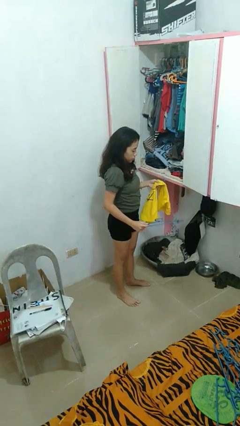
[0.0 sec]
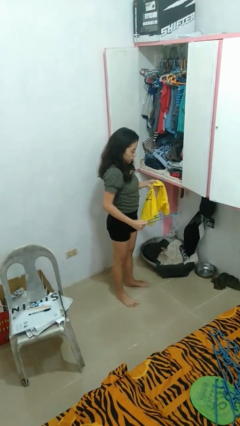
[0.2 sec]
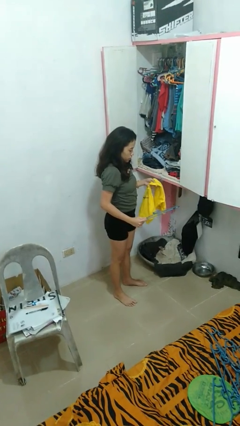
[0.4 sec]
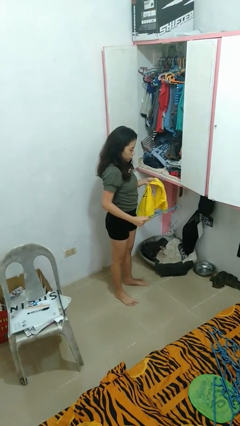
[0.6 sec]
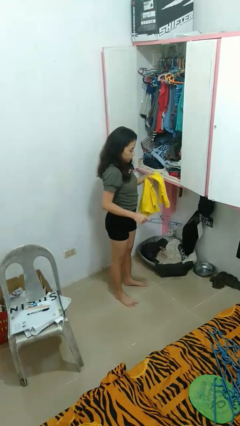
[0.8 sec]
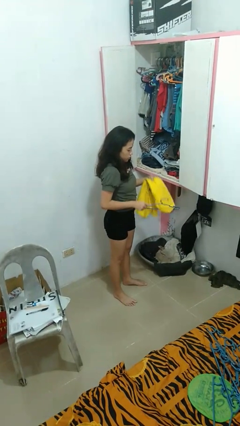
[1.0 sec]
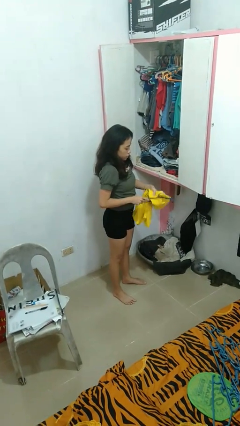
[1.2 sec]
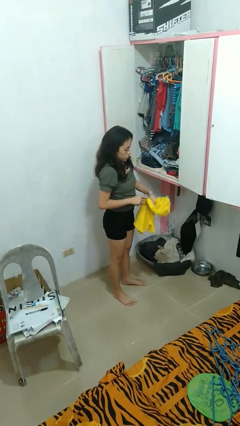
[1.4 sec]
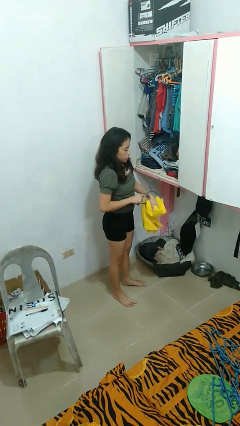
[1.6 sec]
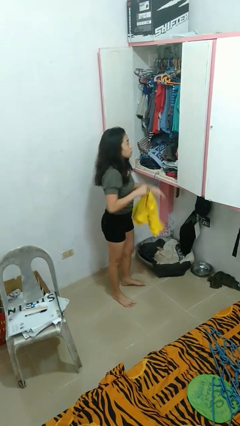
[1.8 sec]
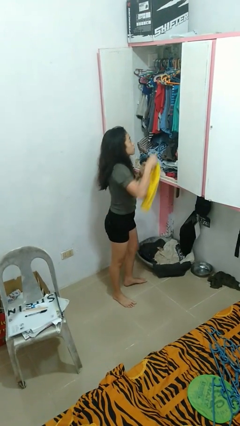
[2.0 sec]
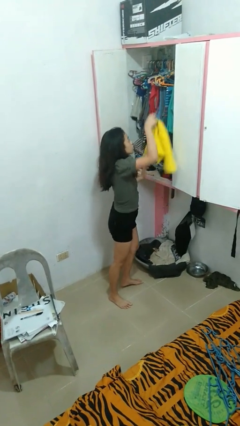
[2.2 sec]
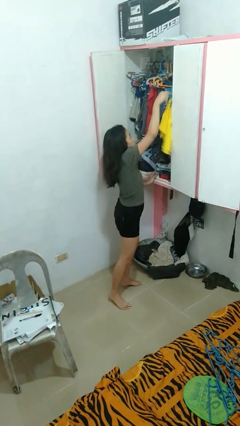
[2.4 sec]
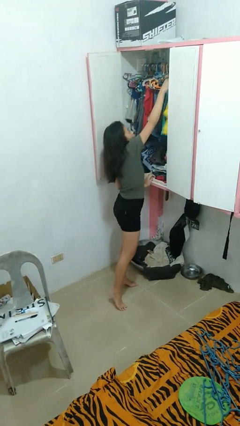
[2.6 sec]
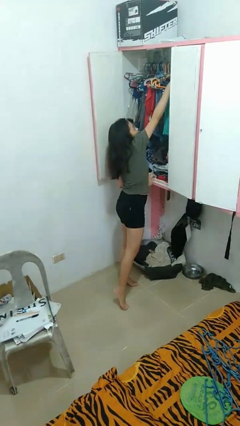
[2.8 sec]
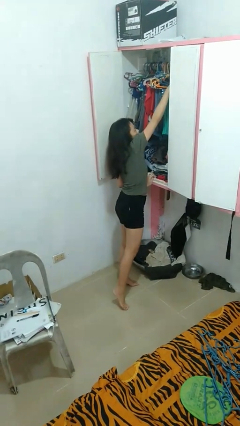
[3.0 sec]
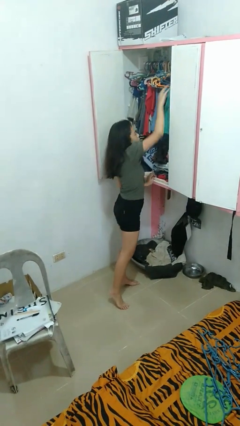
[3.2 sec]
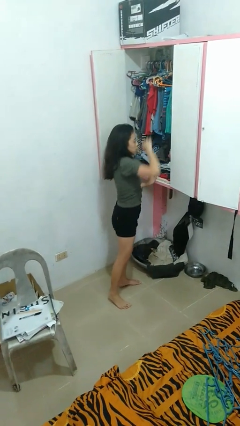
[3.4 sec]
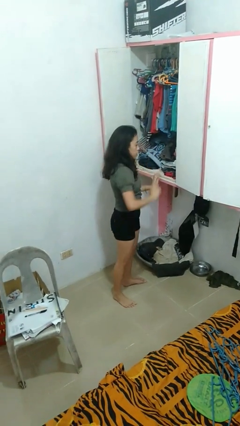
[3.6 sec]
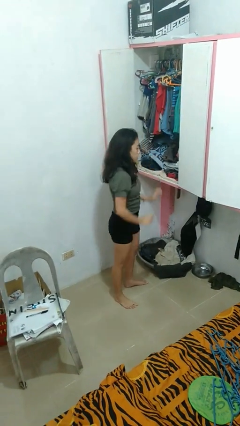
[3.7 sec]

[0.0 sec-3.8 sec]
person puts clothes into closet

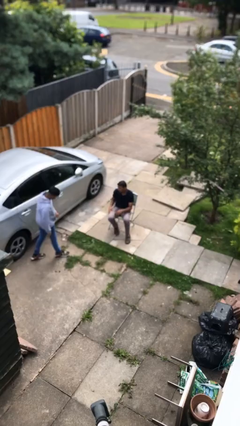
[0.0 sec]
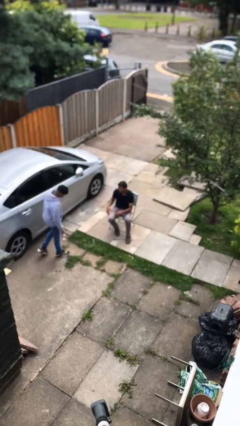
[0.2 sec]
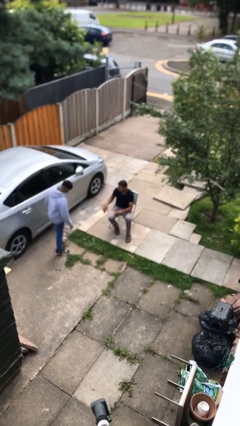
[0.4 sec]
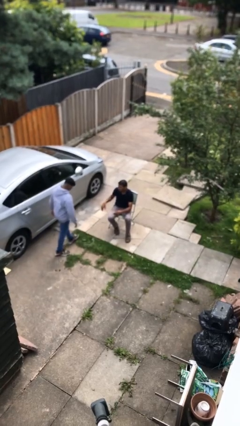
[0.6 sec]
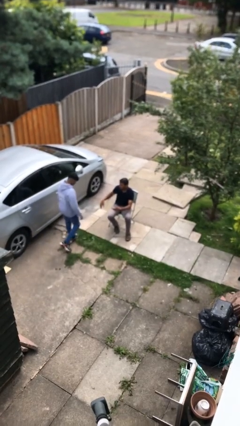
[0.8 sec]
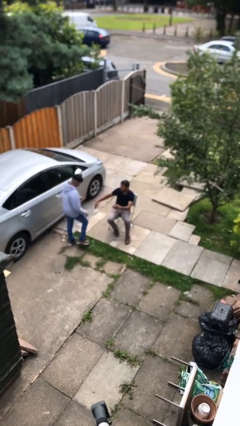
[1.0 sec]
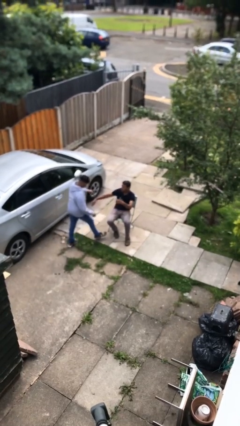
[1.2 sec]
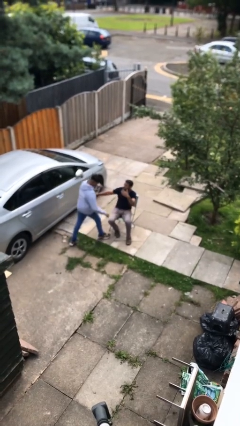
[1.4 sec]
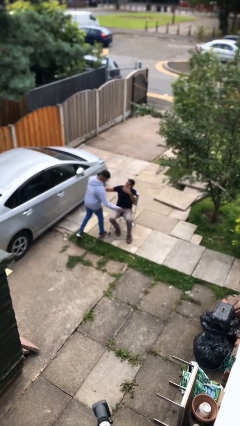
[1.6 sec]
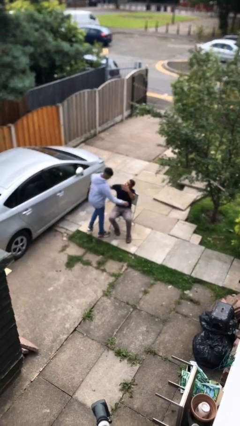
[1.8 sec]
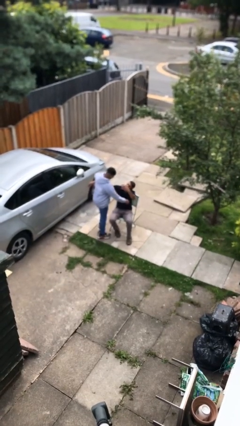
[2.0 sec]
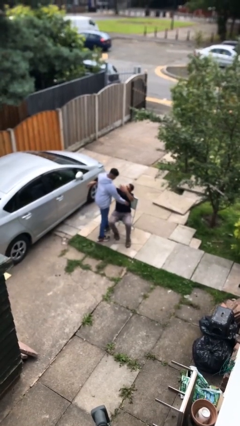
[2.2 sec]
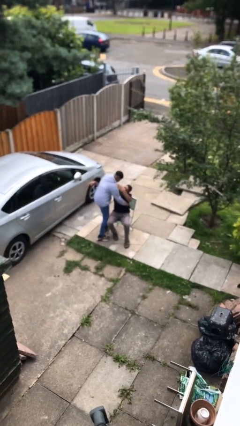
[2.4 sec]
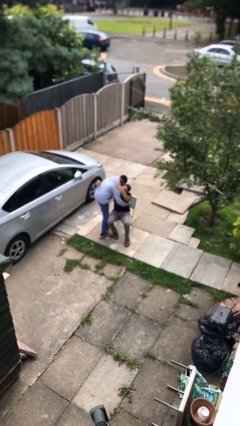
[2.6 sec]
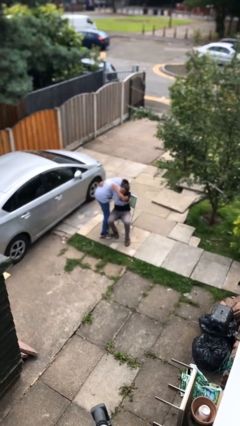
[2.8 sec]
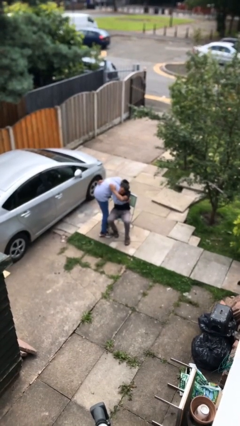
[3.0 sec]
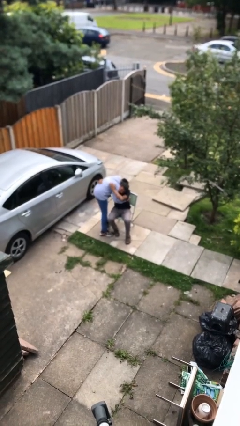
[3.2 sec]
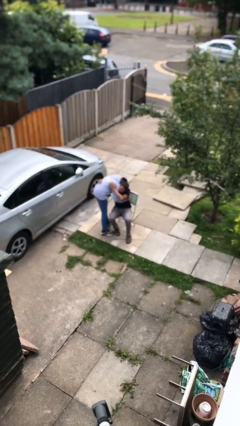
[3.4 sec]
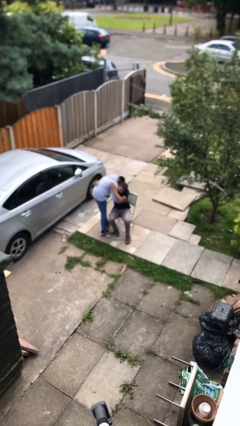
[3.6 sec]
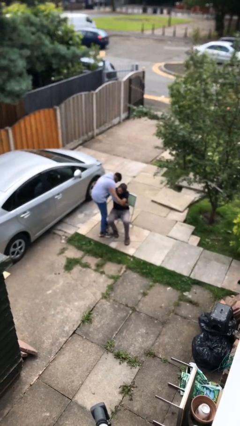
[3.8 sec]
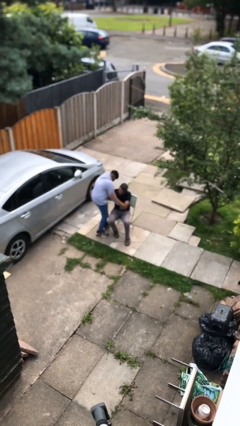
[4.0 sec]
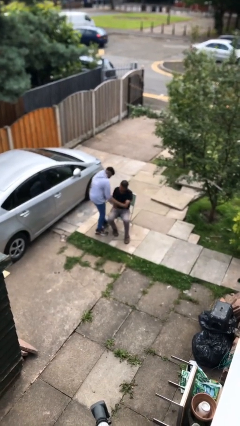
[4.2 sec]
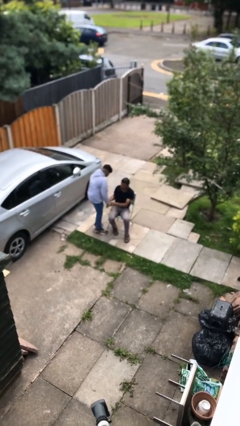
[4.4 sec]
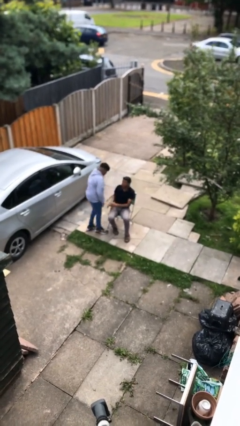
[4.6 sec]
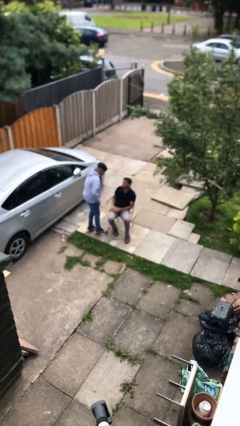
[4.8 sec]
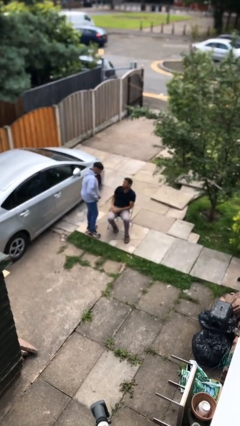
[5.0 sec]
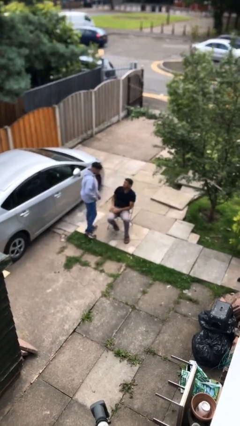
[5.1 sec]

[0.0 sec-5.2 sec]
person embraces person

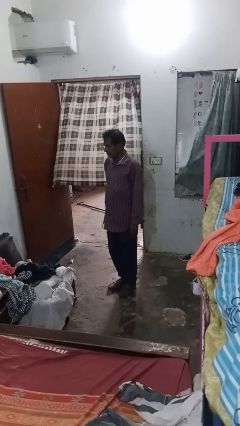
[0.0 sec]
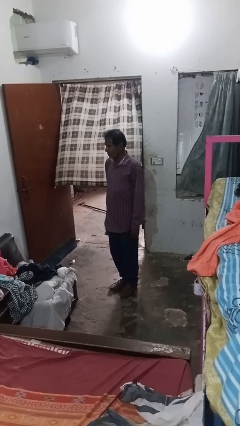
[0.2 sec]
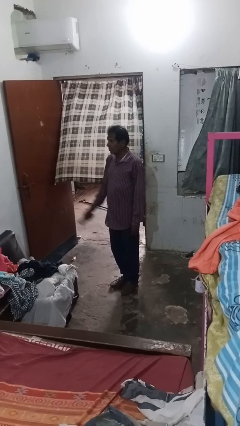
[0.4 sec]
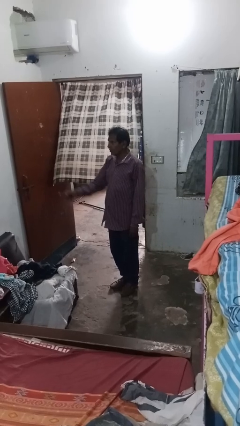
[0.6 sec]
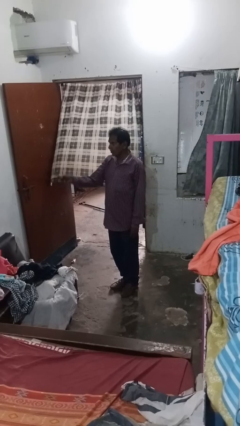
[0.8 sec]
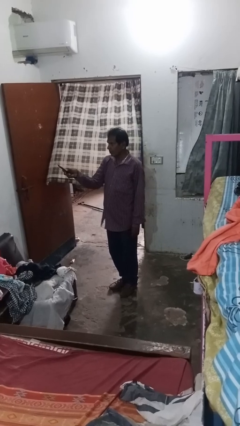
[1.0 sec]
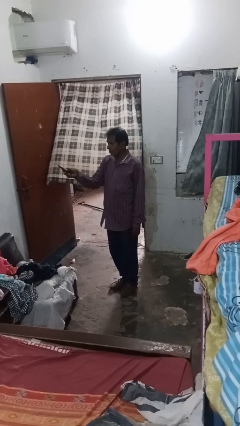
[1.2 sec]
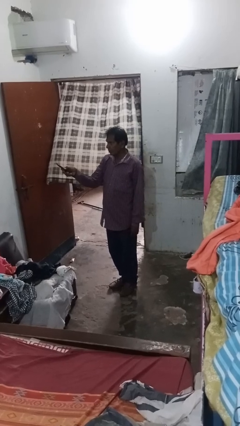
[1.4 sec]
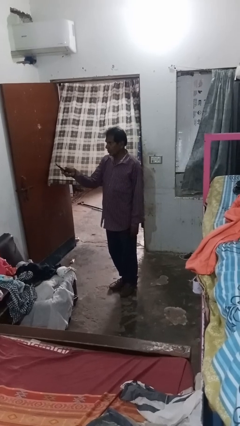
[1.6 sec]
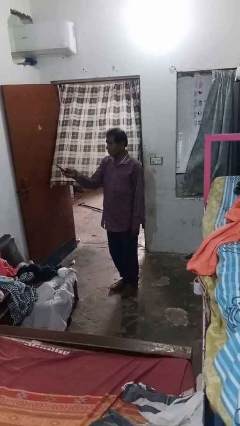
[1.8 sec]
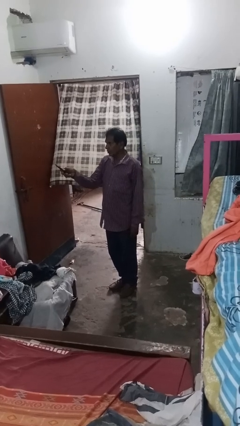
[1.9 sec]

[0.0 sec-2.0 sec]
person uses television remote

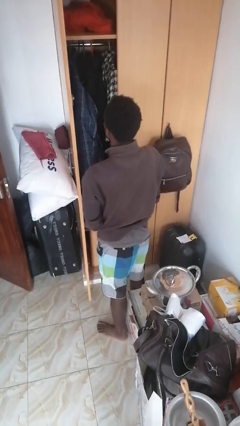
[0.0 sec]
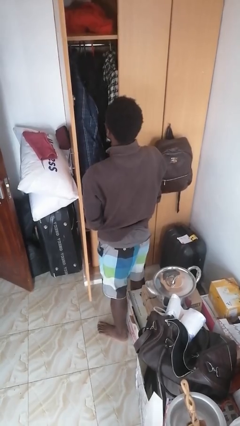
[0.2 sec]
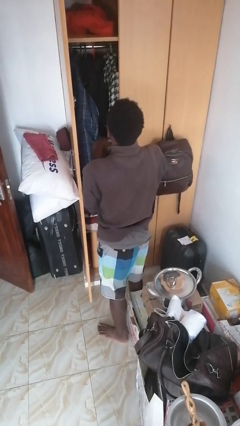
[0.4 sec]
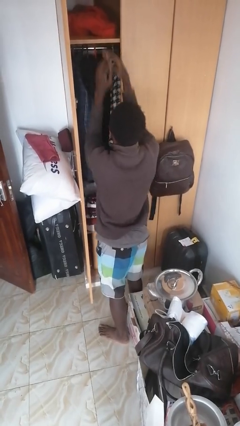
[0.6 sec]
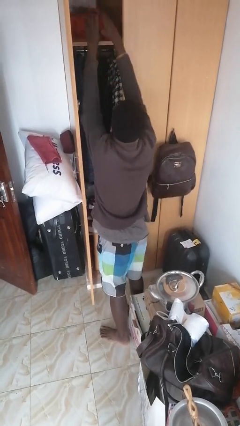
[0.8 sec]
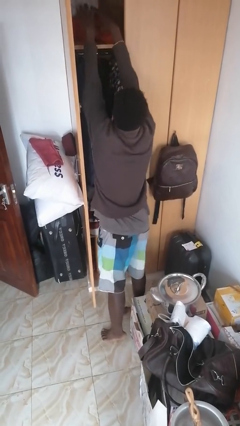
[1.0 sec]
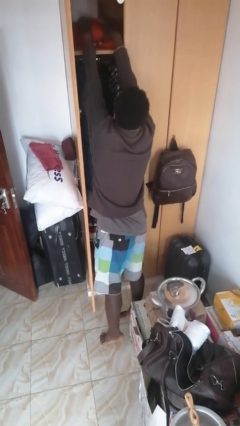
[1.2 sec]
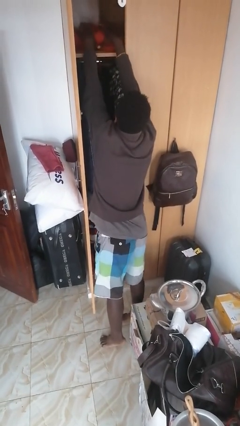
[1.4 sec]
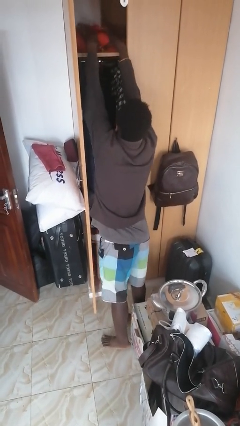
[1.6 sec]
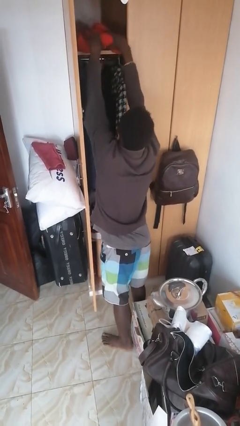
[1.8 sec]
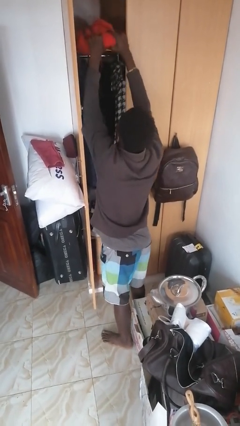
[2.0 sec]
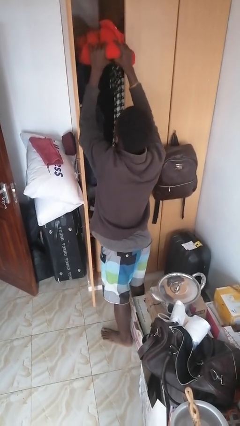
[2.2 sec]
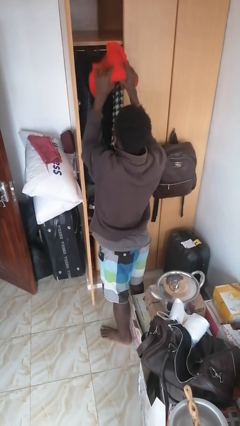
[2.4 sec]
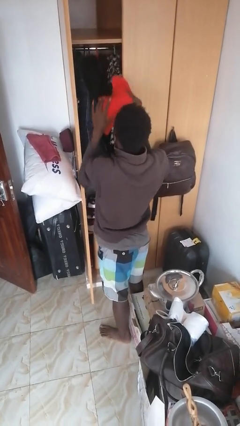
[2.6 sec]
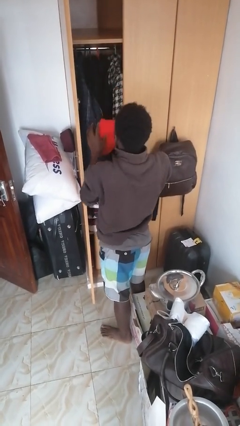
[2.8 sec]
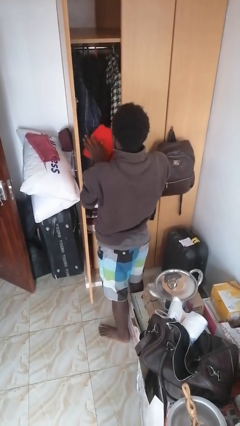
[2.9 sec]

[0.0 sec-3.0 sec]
person picks up object from shelf

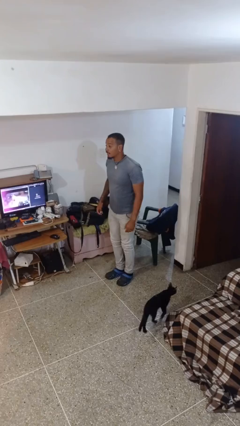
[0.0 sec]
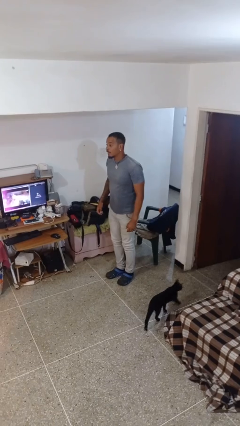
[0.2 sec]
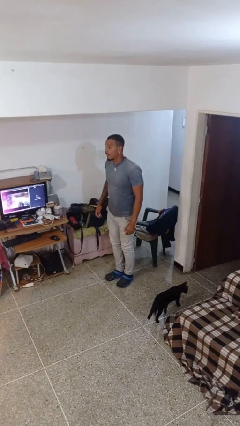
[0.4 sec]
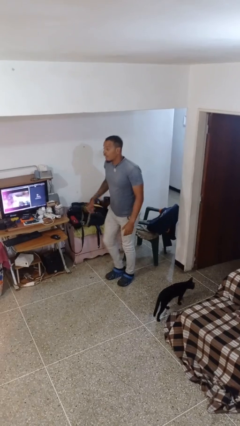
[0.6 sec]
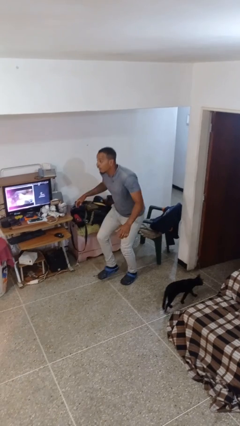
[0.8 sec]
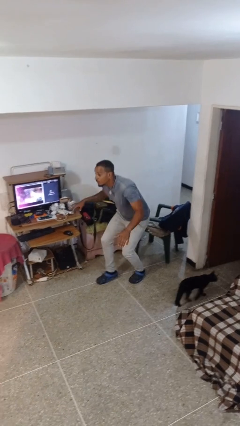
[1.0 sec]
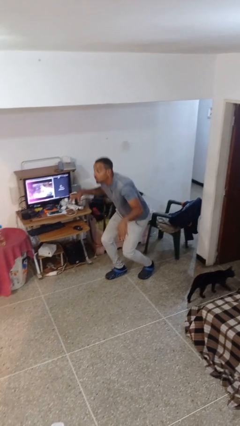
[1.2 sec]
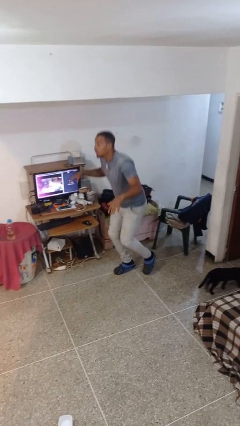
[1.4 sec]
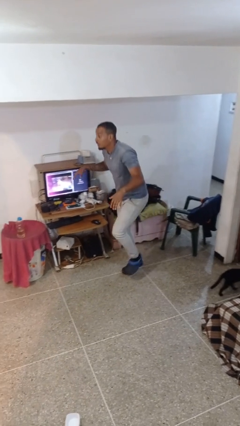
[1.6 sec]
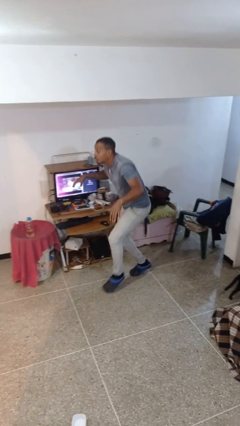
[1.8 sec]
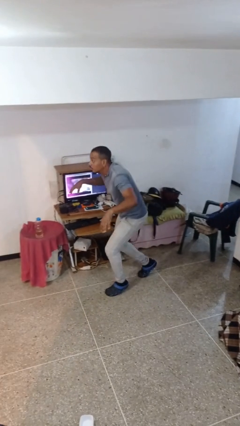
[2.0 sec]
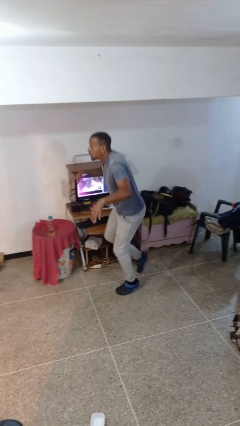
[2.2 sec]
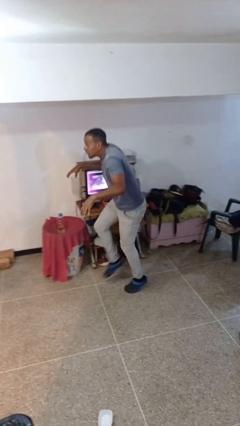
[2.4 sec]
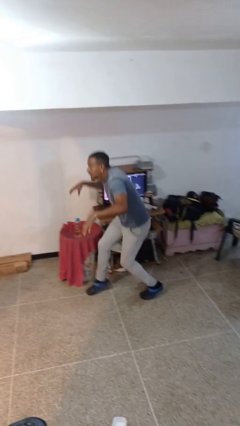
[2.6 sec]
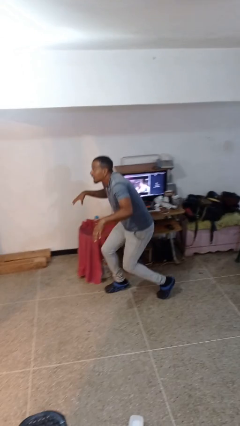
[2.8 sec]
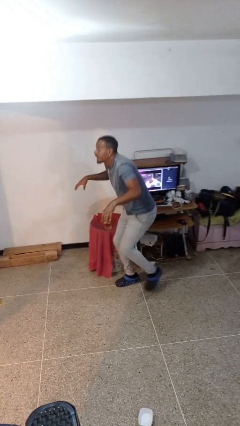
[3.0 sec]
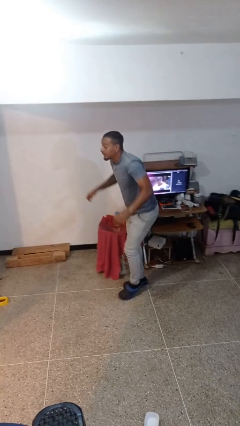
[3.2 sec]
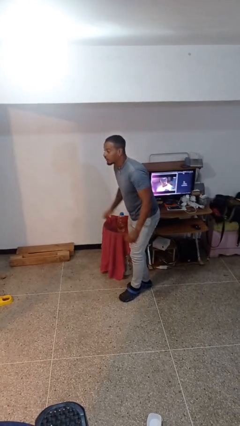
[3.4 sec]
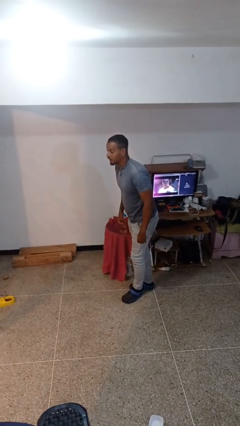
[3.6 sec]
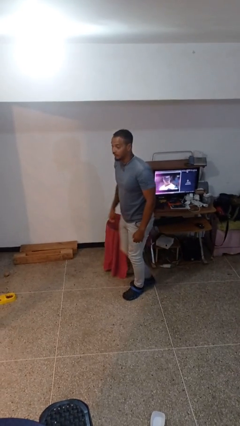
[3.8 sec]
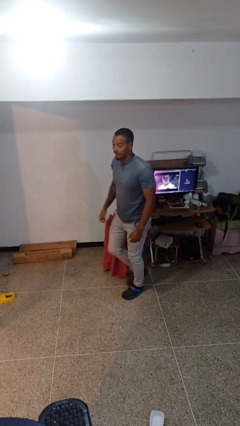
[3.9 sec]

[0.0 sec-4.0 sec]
person walks tiptoe
